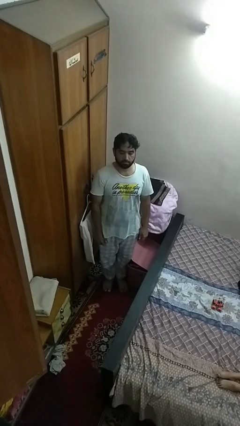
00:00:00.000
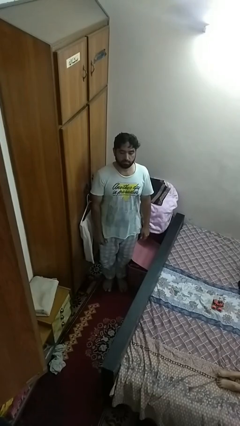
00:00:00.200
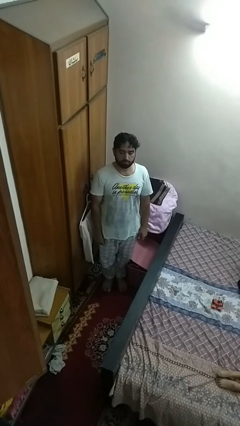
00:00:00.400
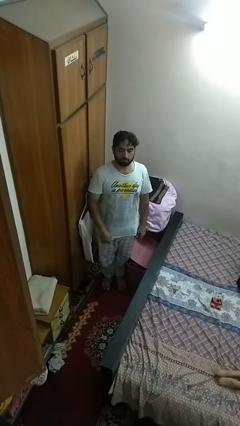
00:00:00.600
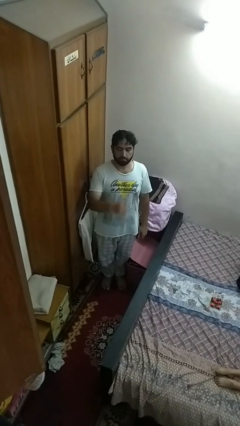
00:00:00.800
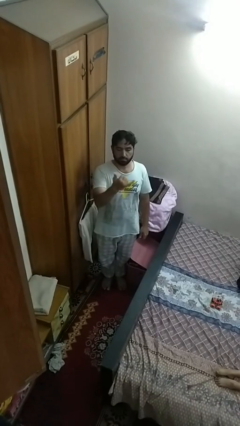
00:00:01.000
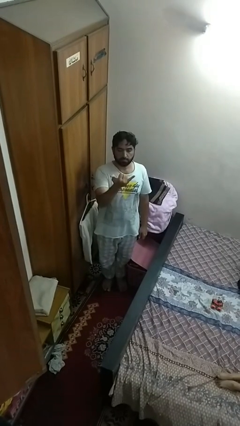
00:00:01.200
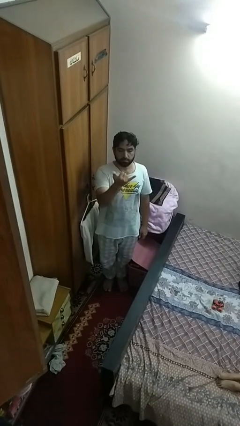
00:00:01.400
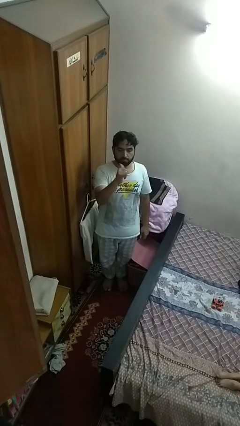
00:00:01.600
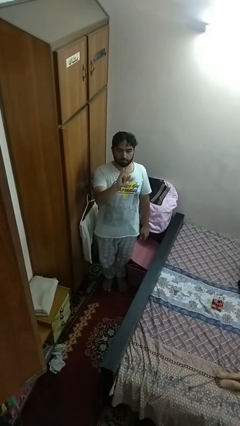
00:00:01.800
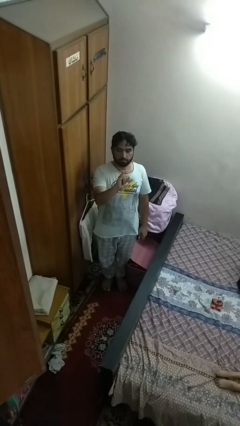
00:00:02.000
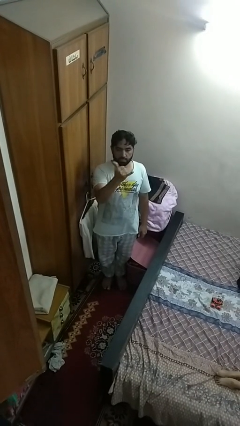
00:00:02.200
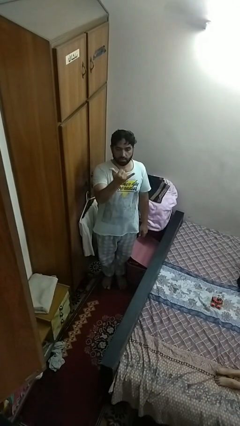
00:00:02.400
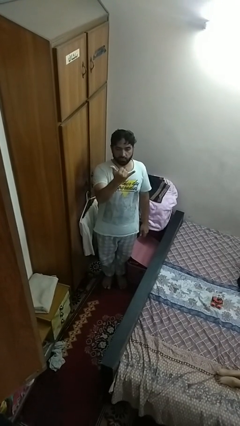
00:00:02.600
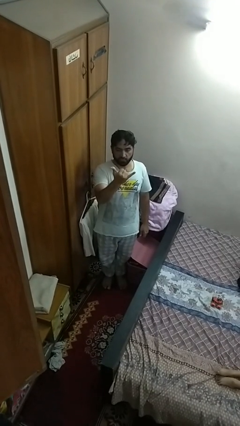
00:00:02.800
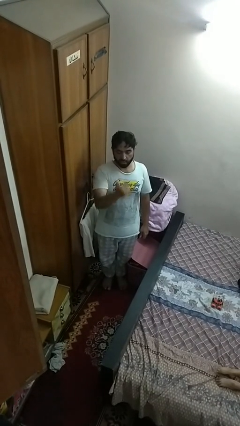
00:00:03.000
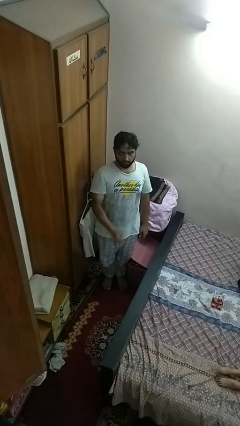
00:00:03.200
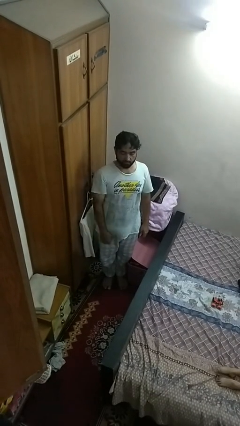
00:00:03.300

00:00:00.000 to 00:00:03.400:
person gestures hang loose

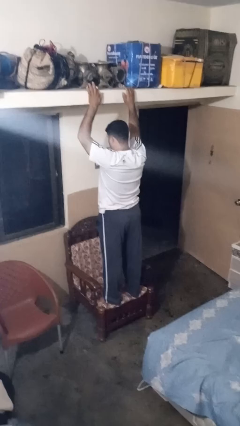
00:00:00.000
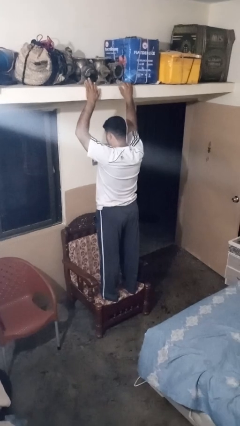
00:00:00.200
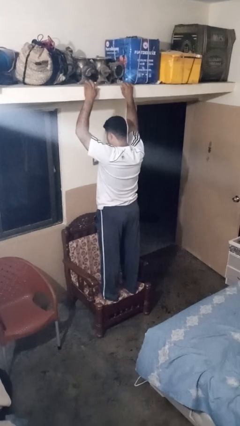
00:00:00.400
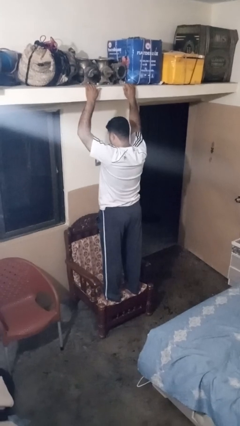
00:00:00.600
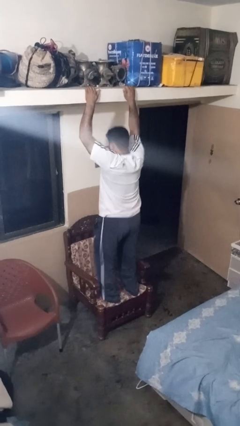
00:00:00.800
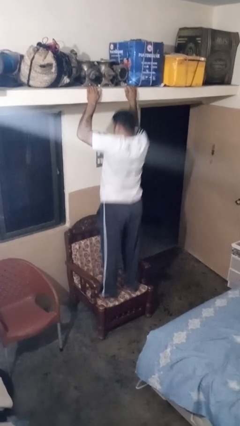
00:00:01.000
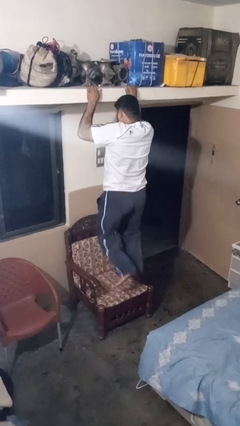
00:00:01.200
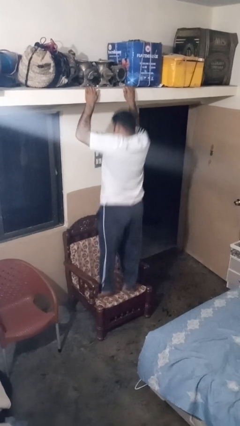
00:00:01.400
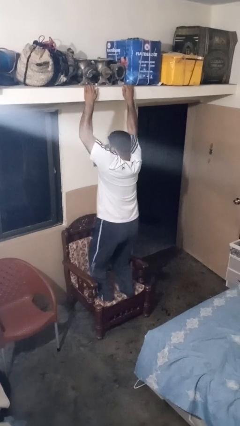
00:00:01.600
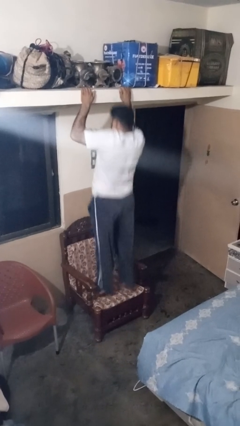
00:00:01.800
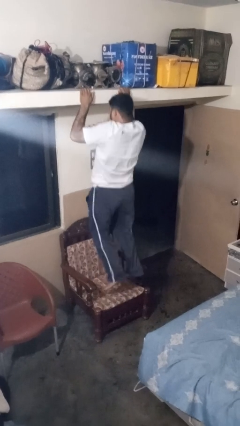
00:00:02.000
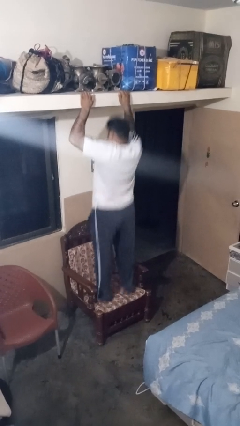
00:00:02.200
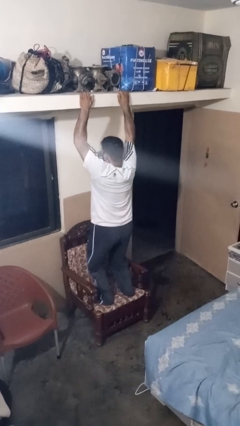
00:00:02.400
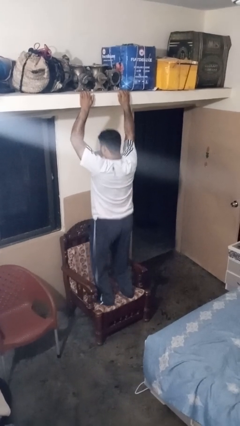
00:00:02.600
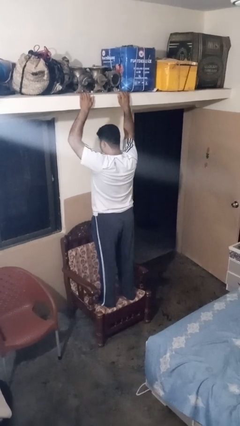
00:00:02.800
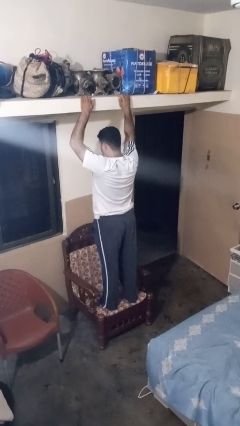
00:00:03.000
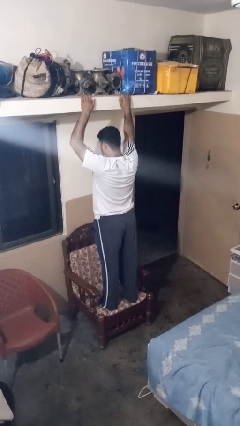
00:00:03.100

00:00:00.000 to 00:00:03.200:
person jumps on couch

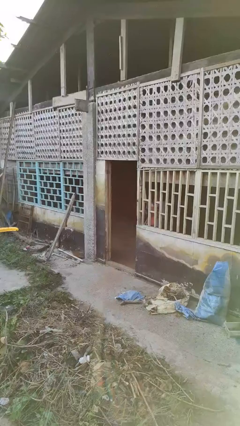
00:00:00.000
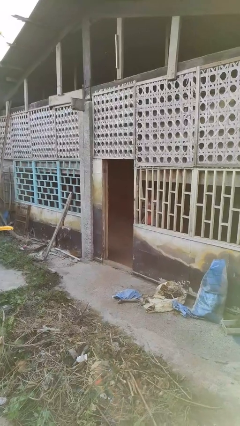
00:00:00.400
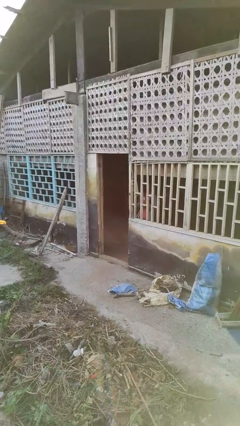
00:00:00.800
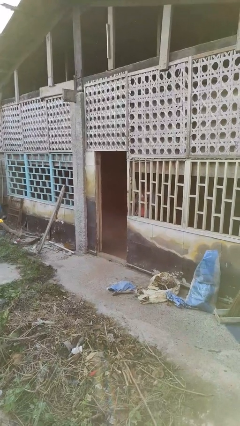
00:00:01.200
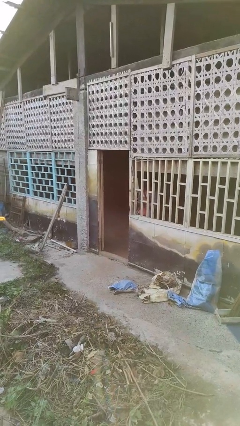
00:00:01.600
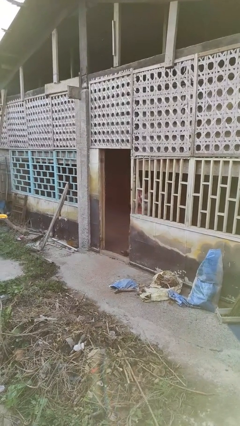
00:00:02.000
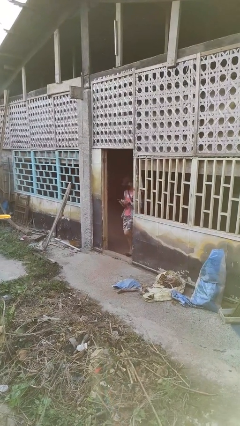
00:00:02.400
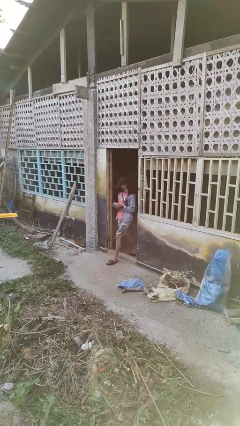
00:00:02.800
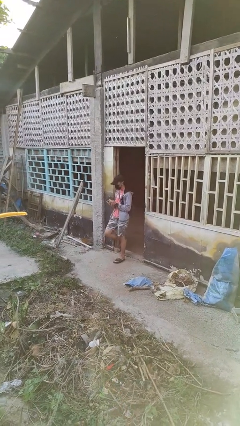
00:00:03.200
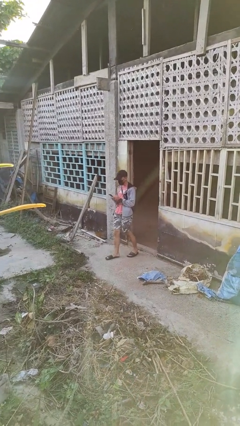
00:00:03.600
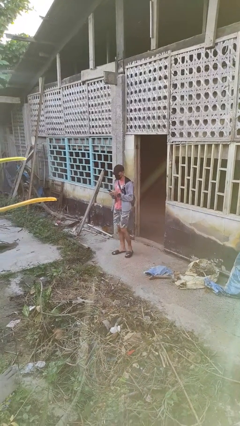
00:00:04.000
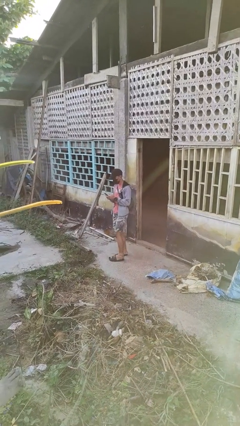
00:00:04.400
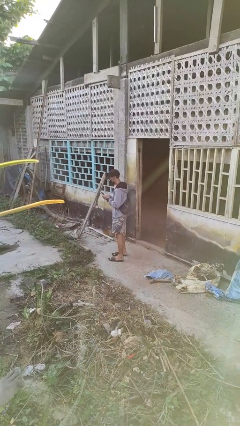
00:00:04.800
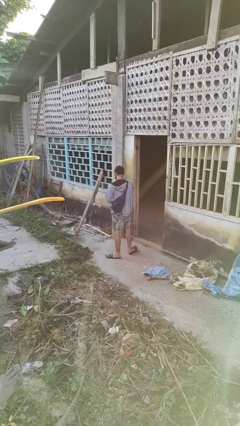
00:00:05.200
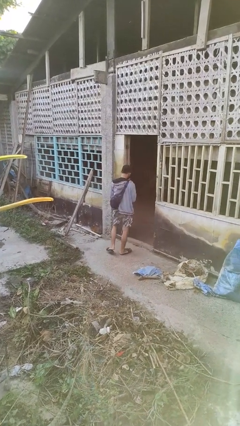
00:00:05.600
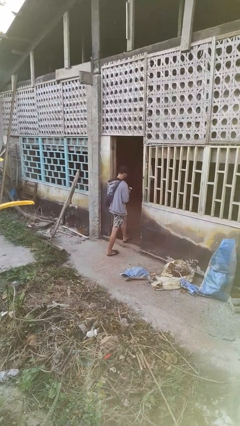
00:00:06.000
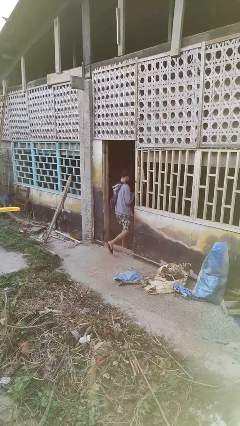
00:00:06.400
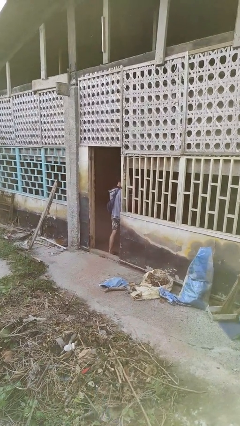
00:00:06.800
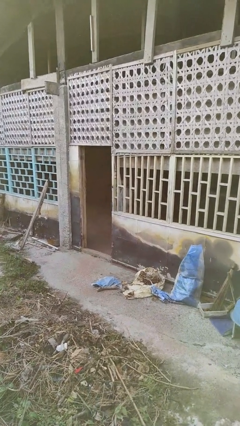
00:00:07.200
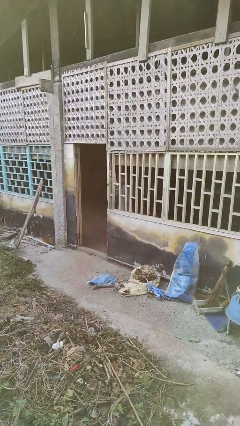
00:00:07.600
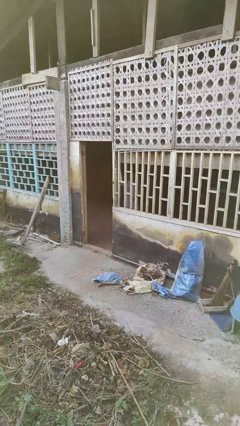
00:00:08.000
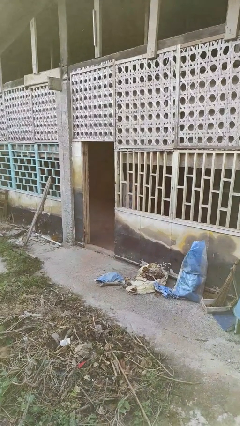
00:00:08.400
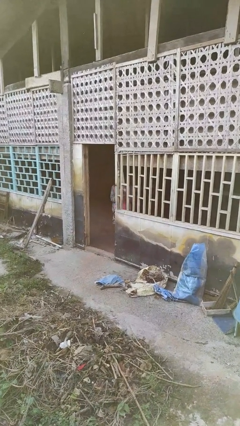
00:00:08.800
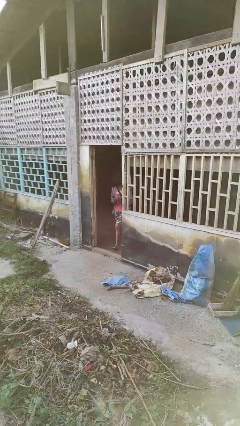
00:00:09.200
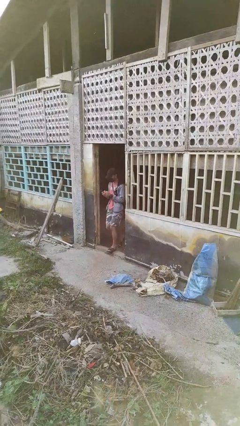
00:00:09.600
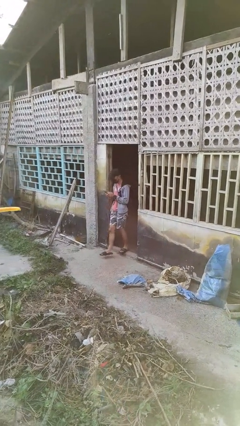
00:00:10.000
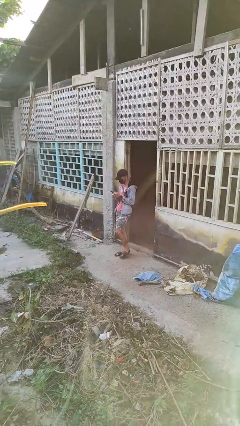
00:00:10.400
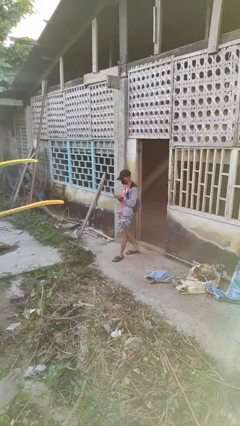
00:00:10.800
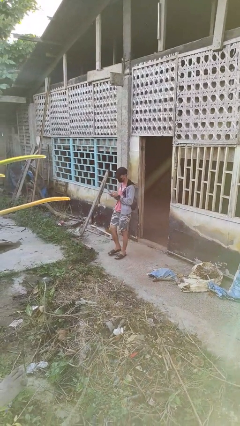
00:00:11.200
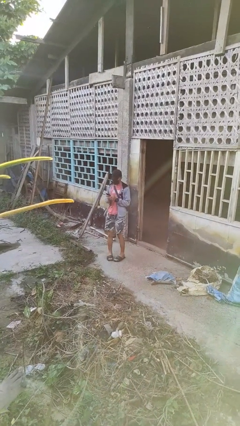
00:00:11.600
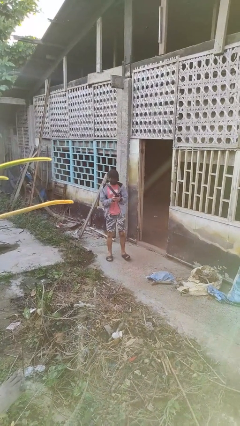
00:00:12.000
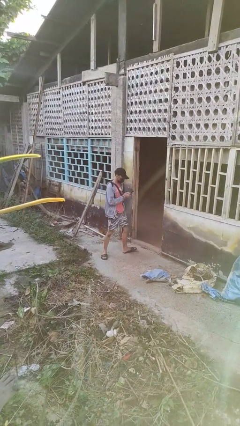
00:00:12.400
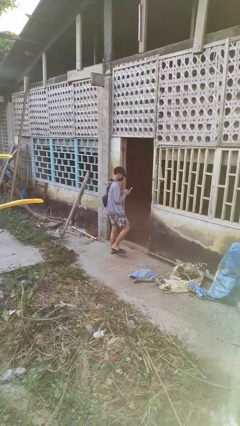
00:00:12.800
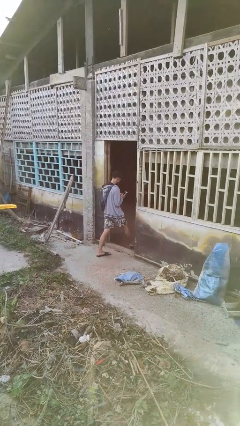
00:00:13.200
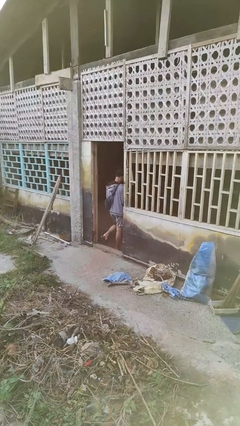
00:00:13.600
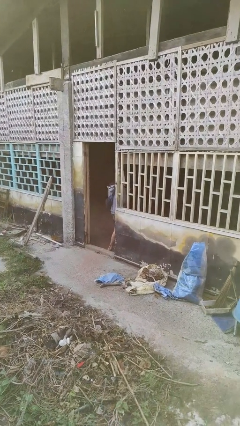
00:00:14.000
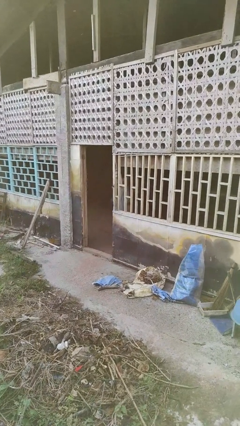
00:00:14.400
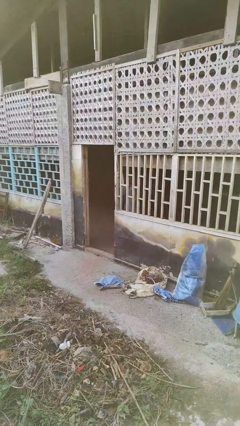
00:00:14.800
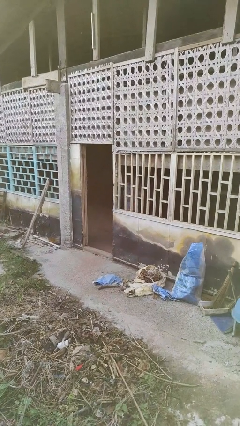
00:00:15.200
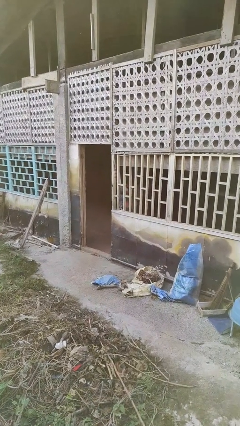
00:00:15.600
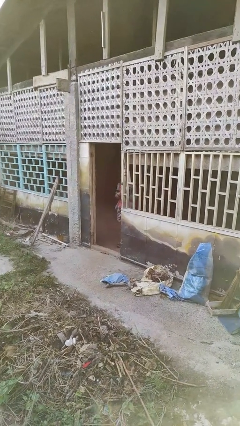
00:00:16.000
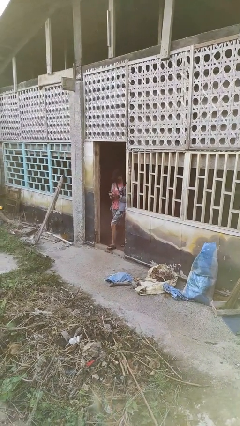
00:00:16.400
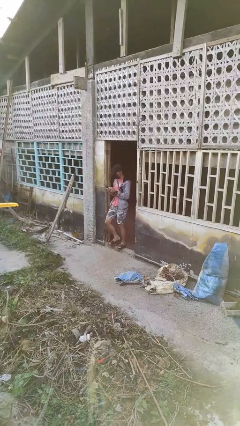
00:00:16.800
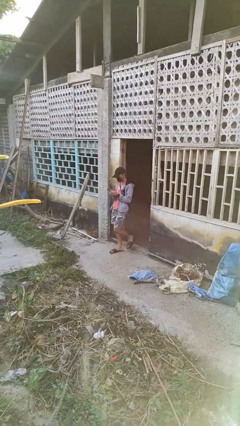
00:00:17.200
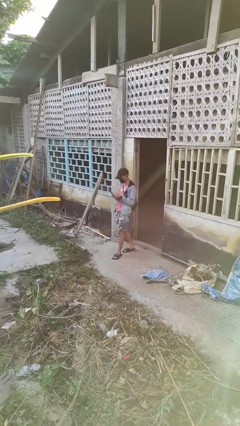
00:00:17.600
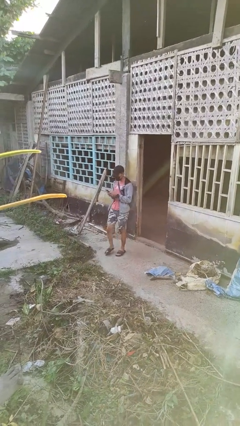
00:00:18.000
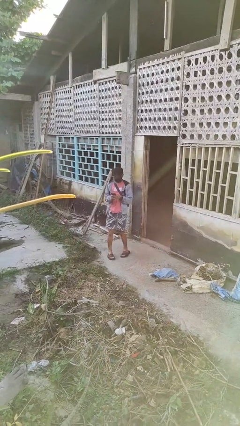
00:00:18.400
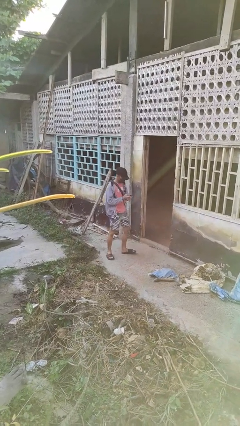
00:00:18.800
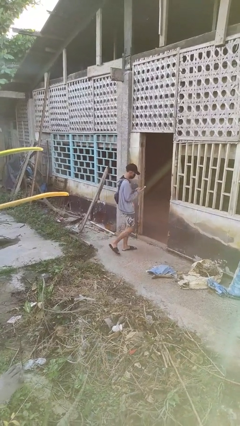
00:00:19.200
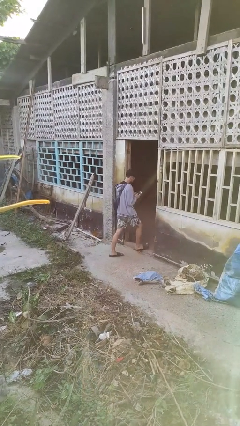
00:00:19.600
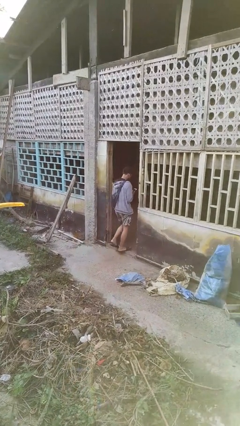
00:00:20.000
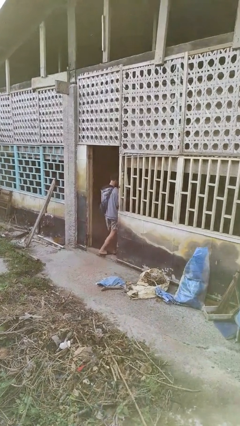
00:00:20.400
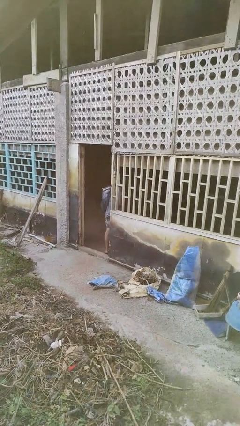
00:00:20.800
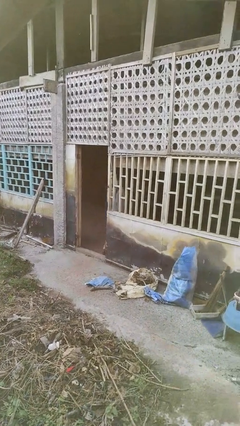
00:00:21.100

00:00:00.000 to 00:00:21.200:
person texts on phone

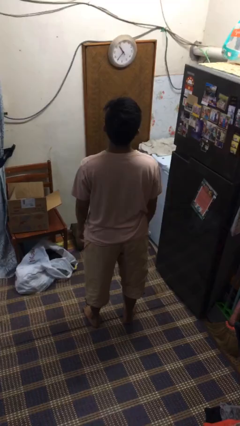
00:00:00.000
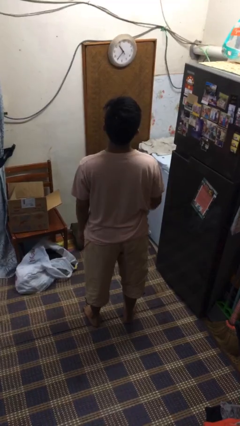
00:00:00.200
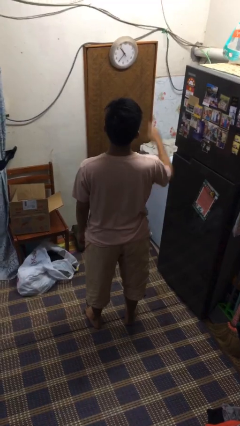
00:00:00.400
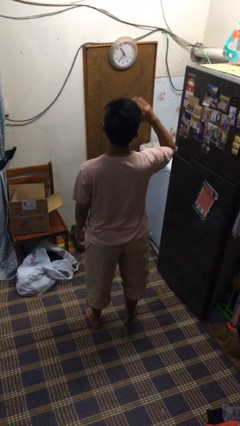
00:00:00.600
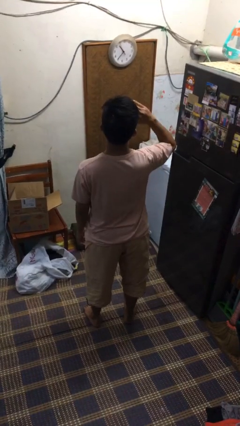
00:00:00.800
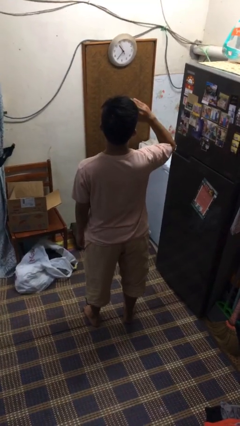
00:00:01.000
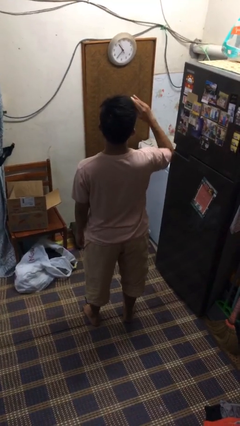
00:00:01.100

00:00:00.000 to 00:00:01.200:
person salutes
